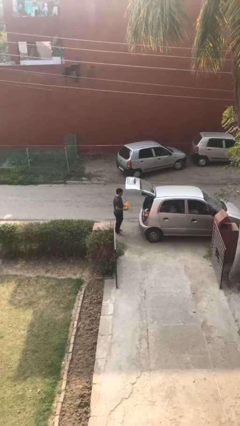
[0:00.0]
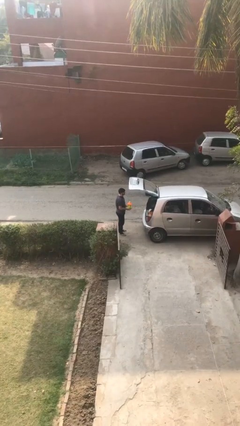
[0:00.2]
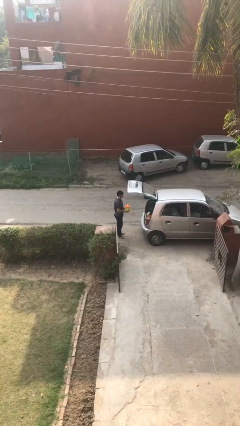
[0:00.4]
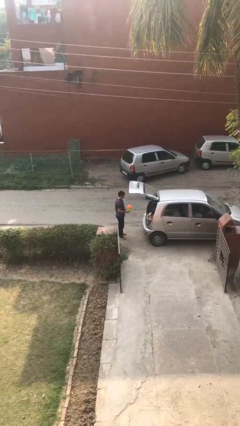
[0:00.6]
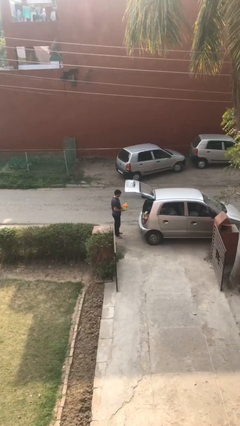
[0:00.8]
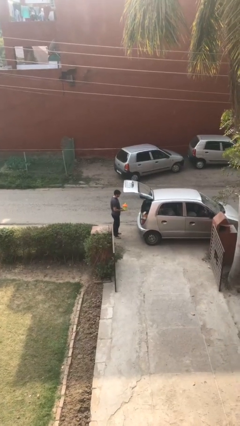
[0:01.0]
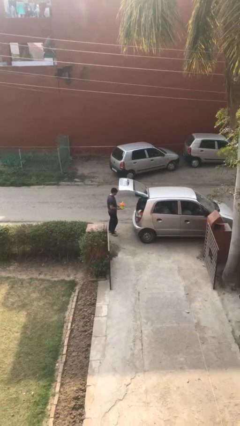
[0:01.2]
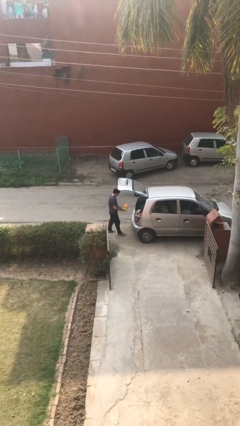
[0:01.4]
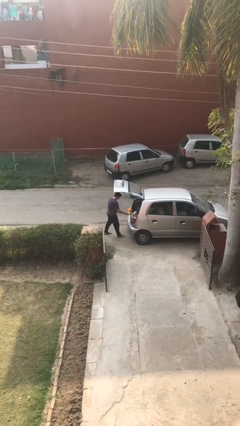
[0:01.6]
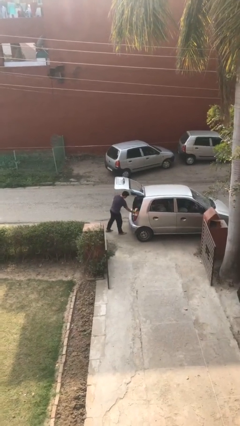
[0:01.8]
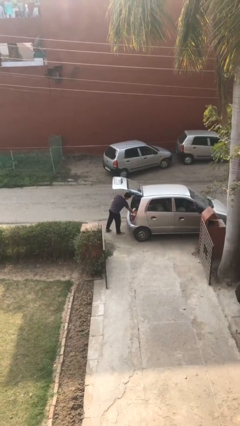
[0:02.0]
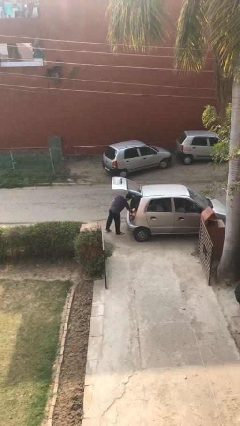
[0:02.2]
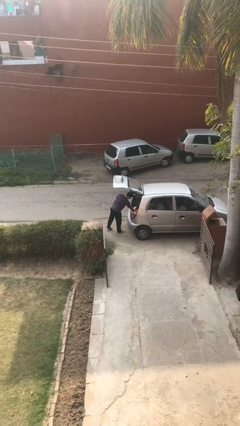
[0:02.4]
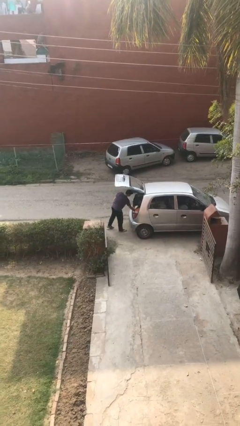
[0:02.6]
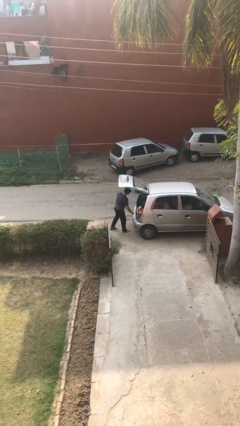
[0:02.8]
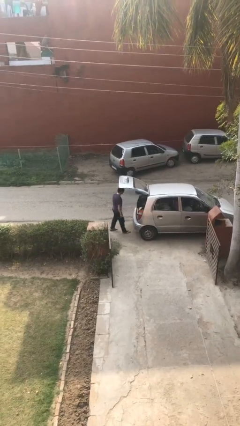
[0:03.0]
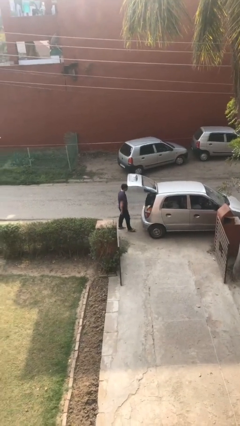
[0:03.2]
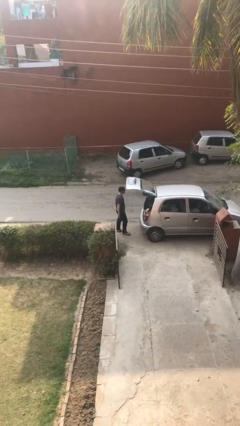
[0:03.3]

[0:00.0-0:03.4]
person loads car

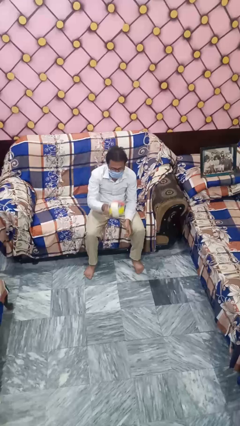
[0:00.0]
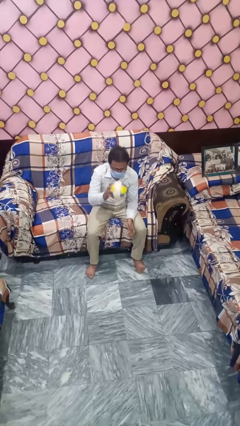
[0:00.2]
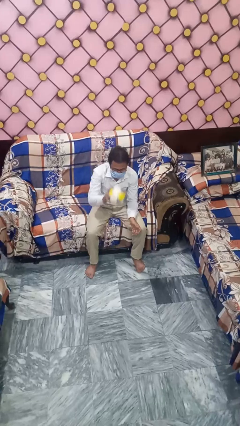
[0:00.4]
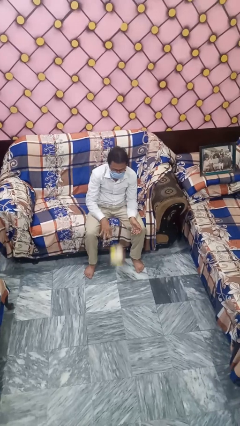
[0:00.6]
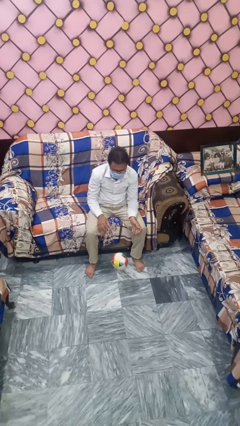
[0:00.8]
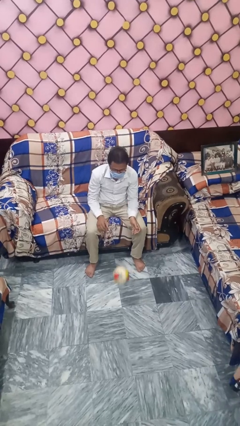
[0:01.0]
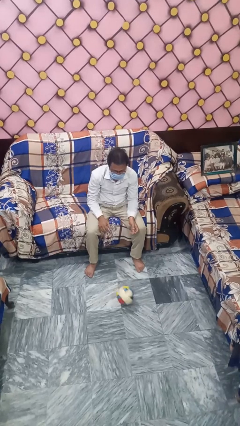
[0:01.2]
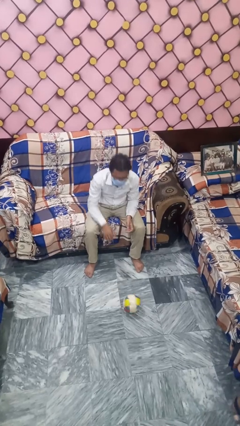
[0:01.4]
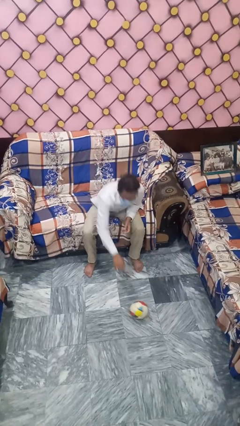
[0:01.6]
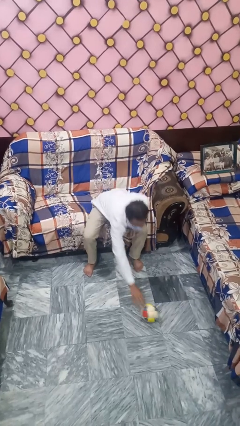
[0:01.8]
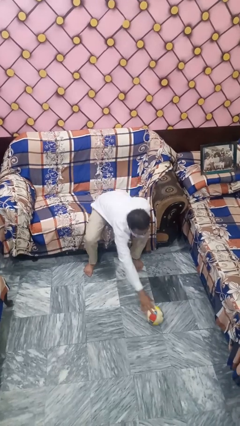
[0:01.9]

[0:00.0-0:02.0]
person bounces ball on floor

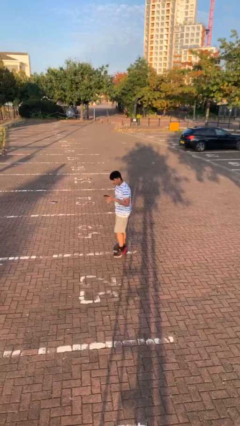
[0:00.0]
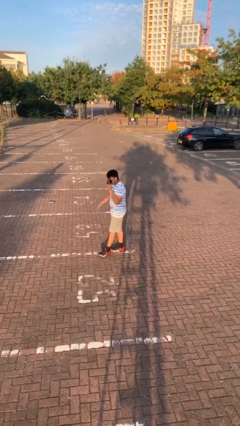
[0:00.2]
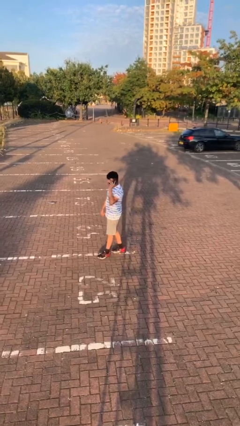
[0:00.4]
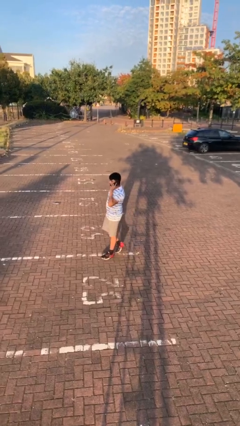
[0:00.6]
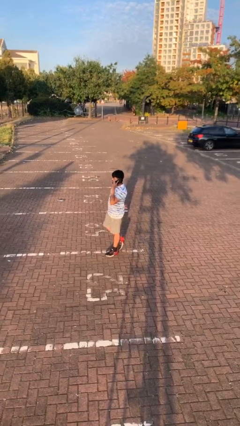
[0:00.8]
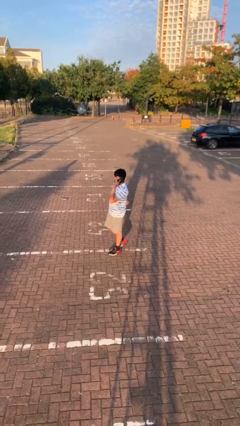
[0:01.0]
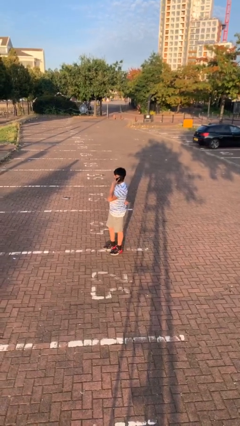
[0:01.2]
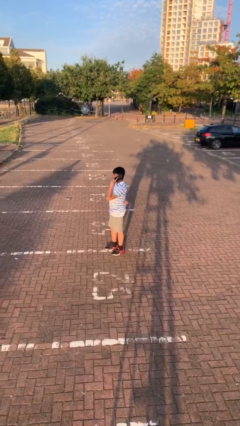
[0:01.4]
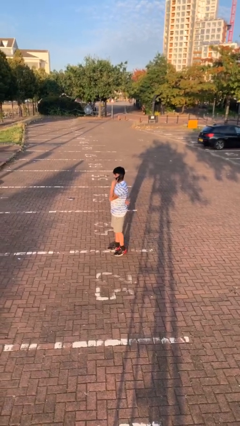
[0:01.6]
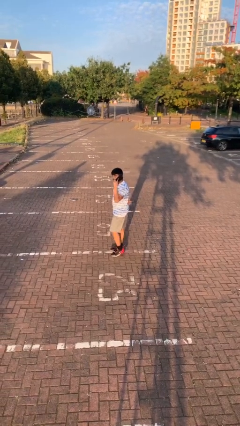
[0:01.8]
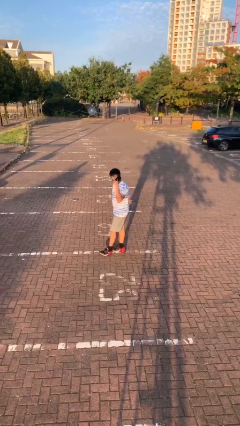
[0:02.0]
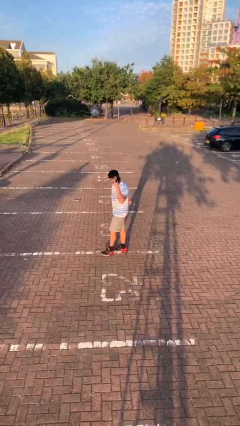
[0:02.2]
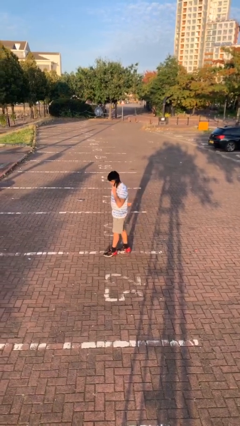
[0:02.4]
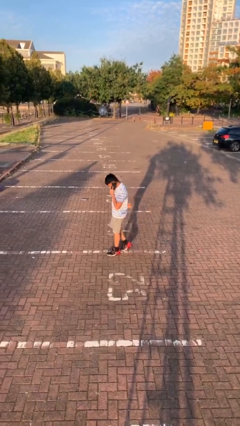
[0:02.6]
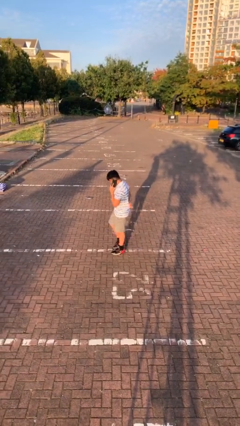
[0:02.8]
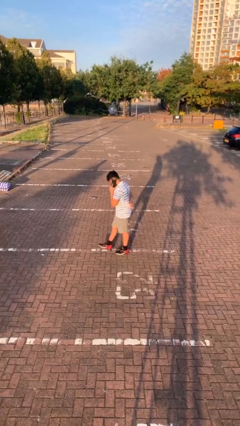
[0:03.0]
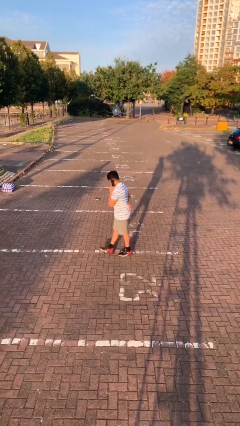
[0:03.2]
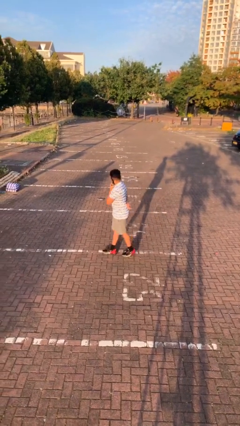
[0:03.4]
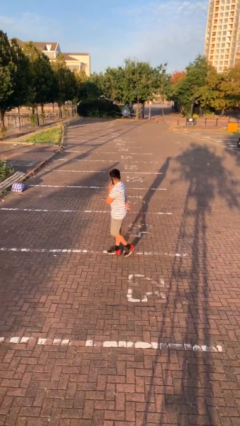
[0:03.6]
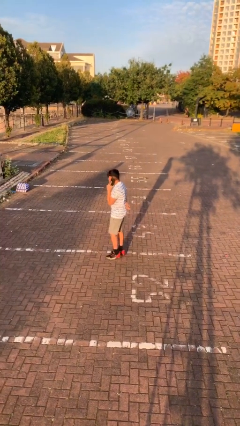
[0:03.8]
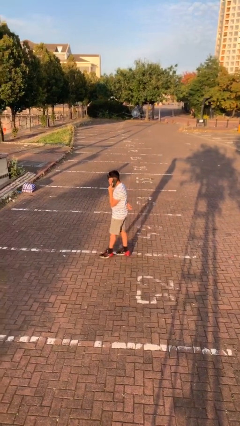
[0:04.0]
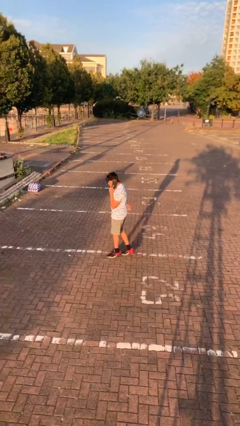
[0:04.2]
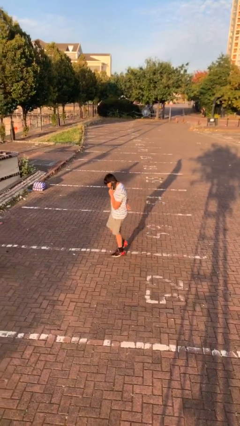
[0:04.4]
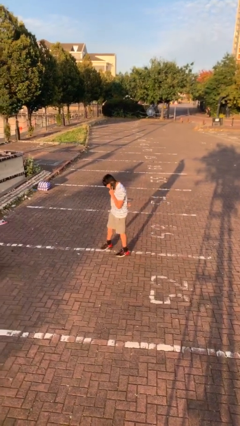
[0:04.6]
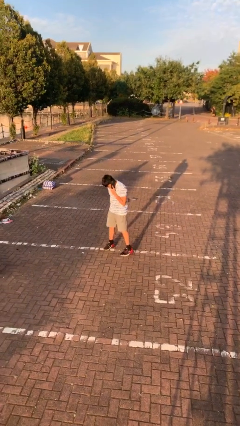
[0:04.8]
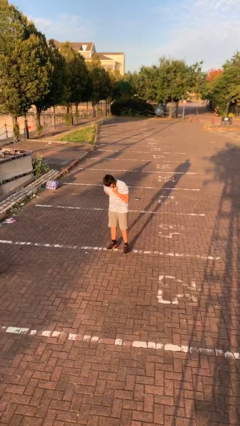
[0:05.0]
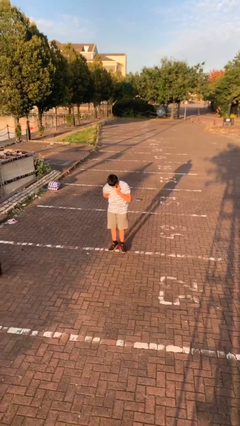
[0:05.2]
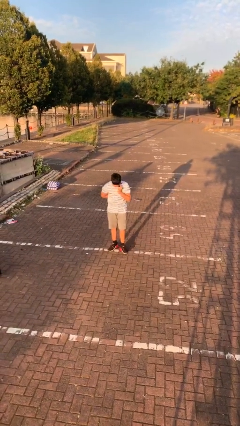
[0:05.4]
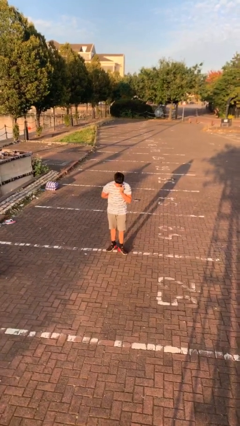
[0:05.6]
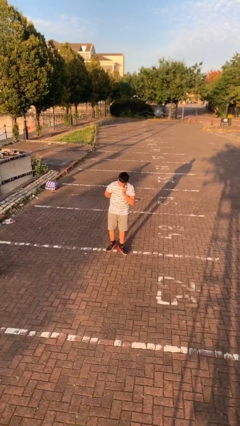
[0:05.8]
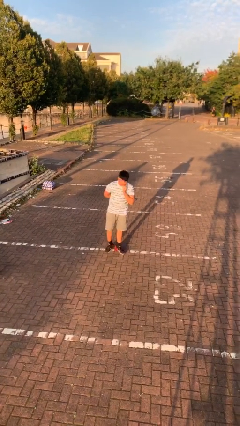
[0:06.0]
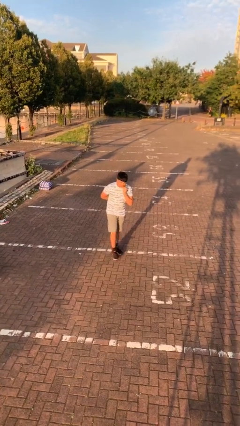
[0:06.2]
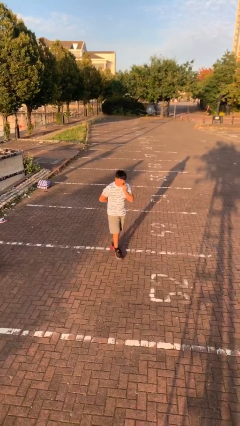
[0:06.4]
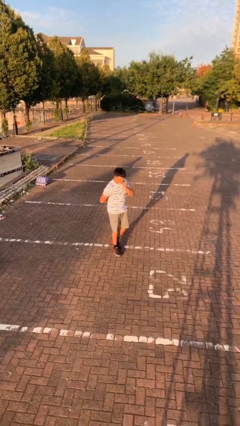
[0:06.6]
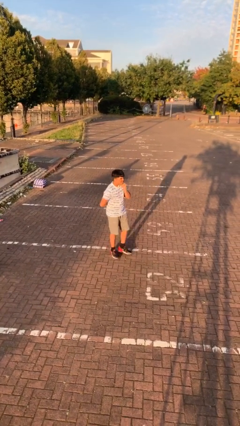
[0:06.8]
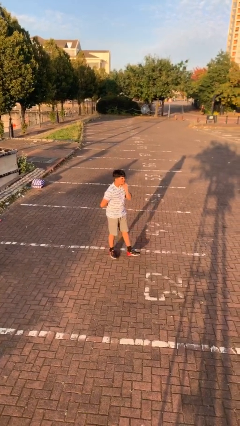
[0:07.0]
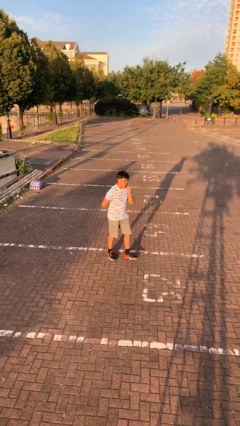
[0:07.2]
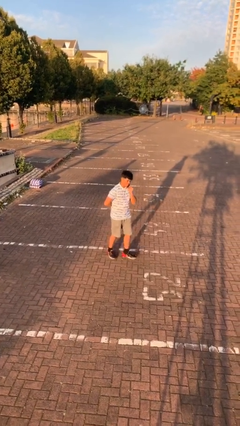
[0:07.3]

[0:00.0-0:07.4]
person talks on phone

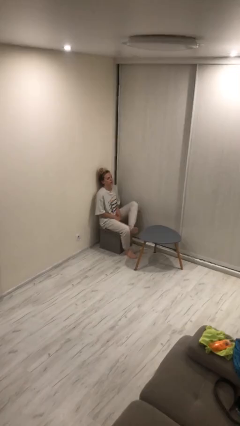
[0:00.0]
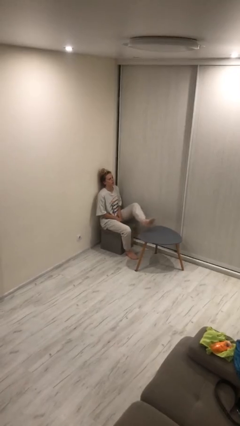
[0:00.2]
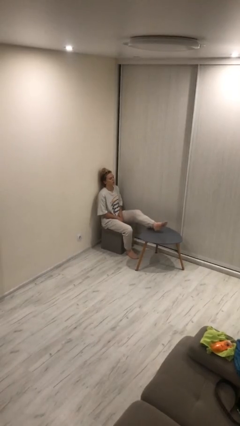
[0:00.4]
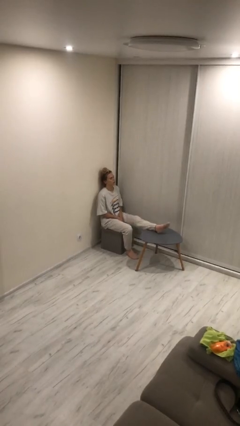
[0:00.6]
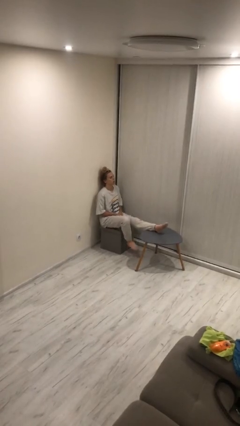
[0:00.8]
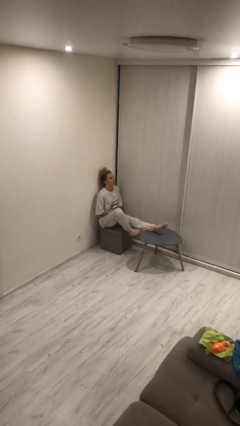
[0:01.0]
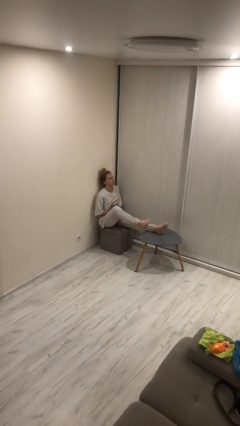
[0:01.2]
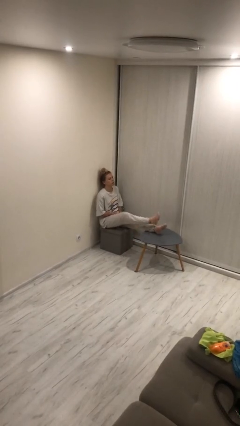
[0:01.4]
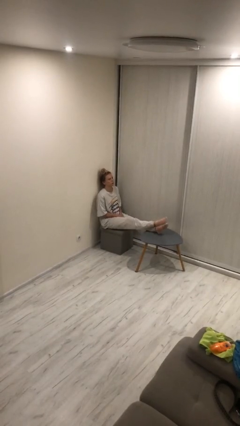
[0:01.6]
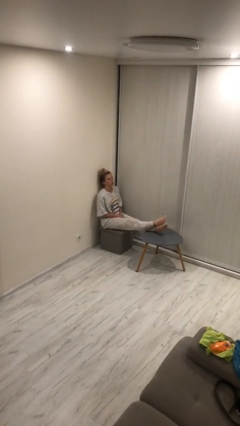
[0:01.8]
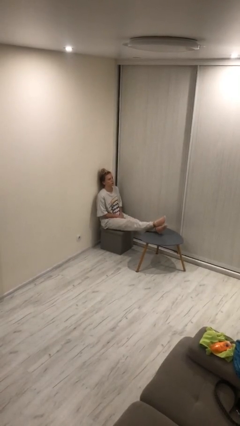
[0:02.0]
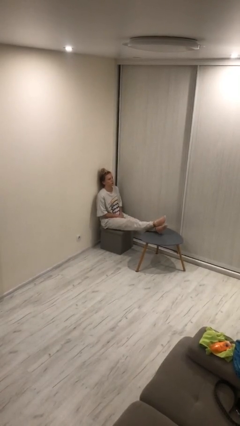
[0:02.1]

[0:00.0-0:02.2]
person puts feet up

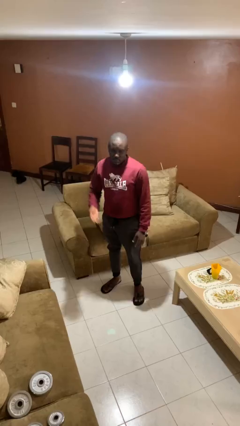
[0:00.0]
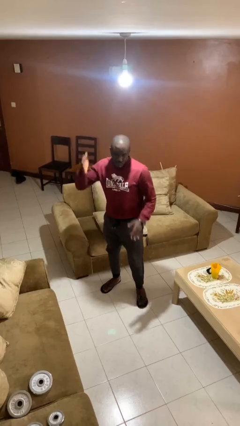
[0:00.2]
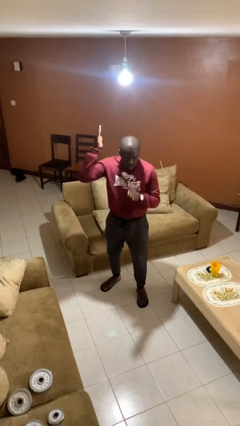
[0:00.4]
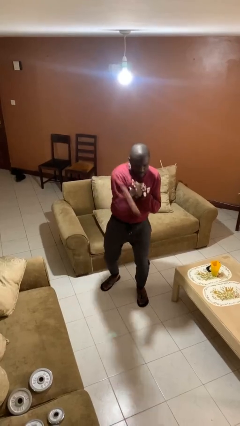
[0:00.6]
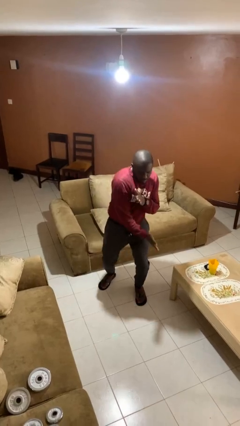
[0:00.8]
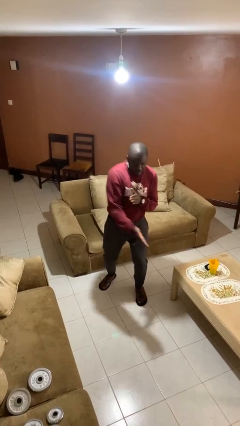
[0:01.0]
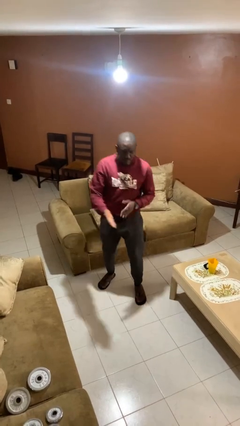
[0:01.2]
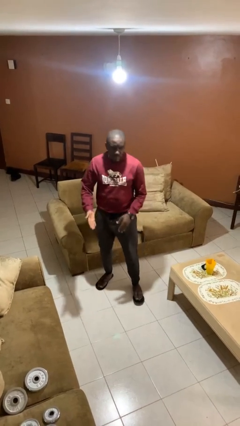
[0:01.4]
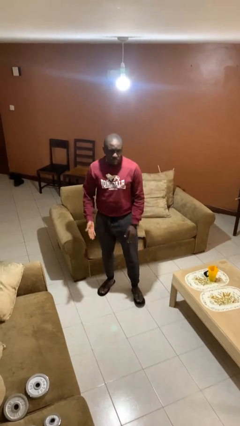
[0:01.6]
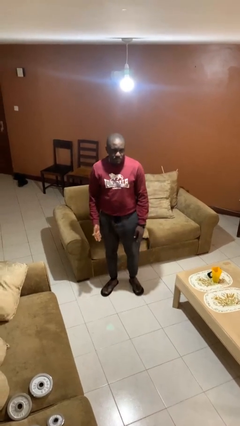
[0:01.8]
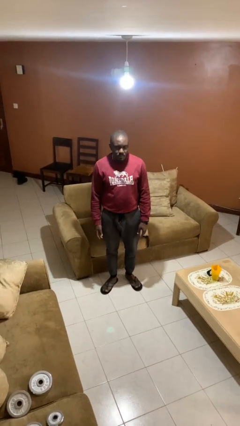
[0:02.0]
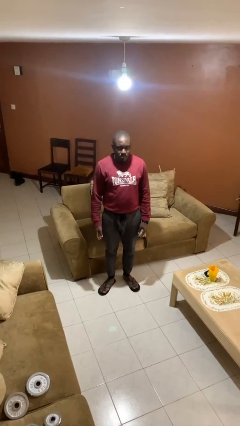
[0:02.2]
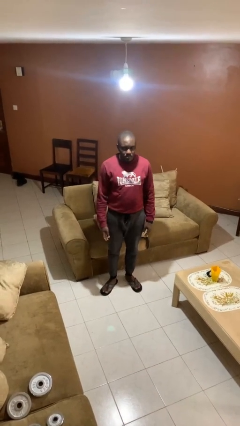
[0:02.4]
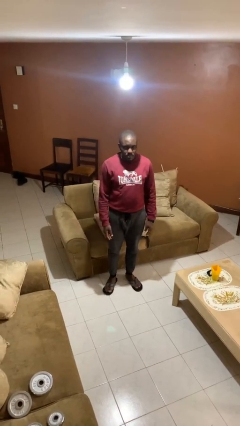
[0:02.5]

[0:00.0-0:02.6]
person karate chop

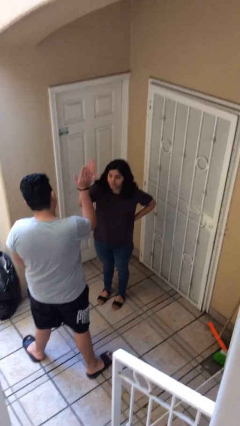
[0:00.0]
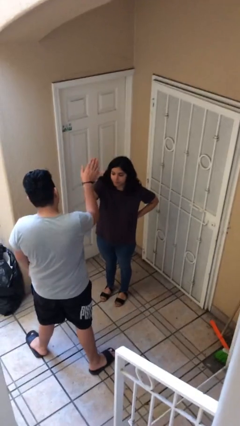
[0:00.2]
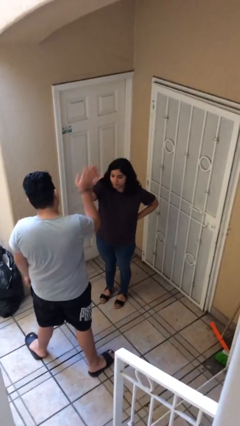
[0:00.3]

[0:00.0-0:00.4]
person highfives hand
